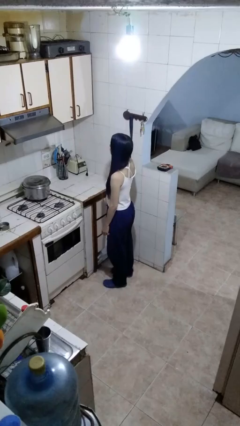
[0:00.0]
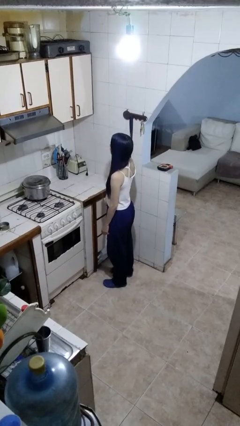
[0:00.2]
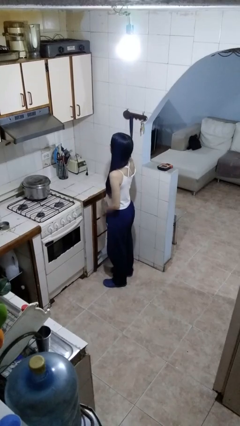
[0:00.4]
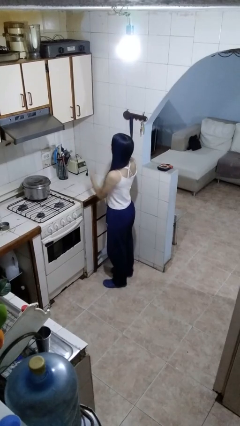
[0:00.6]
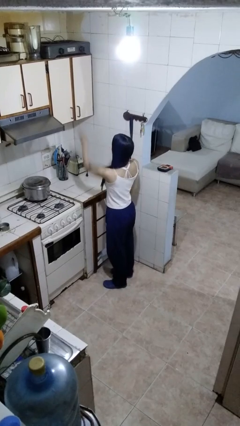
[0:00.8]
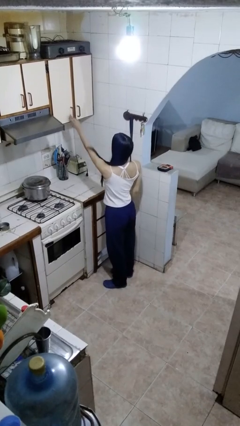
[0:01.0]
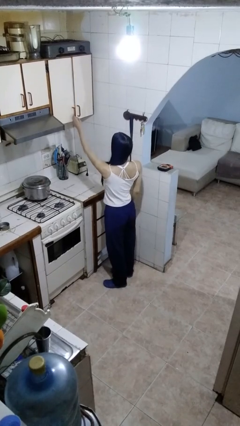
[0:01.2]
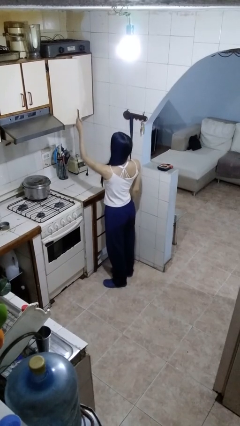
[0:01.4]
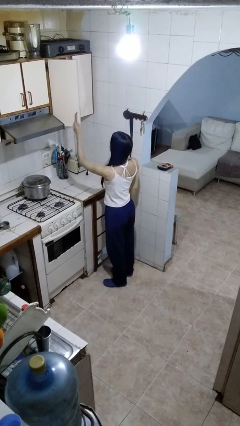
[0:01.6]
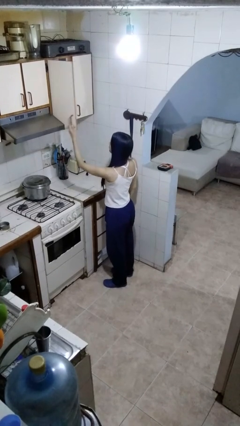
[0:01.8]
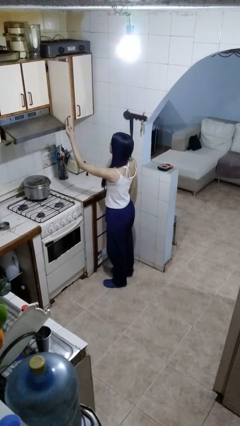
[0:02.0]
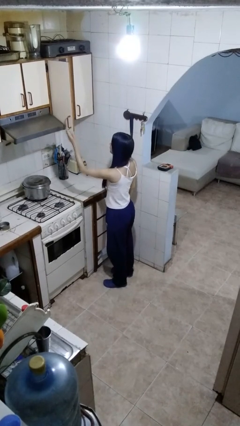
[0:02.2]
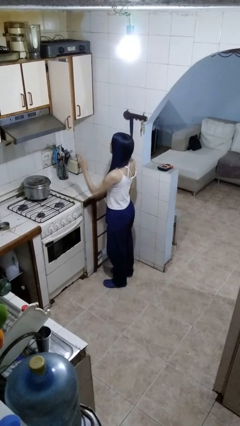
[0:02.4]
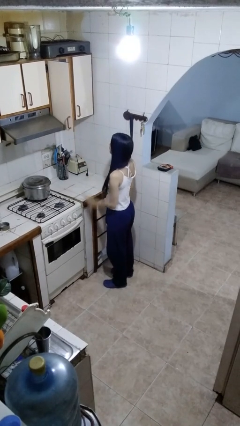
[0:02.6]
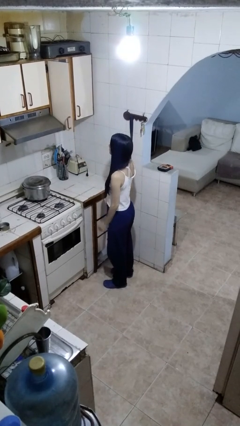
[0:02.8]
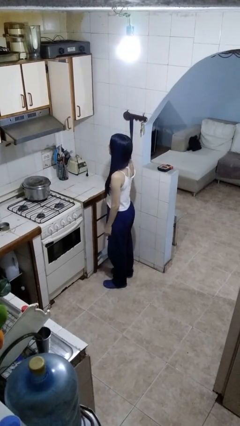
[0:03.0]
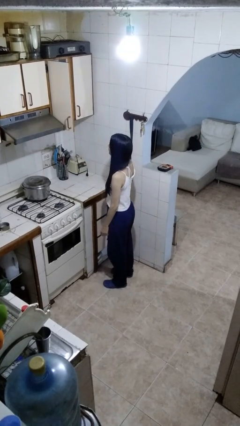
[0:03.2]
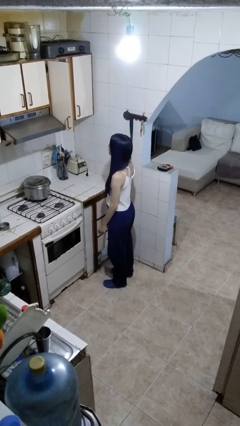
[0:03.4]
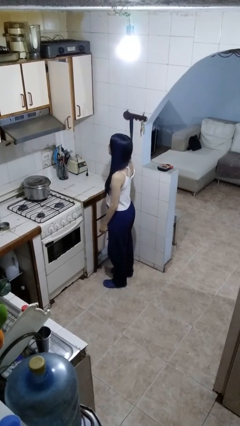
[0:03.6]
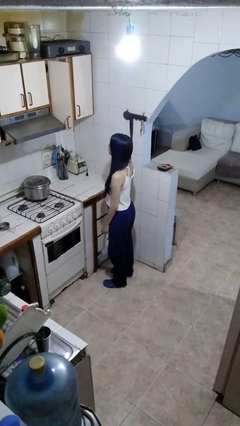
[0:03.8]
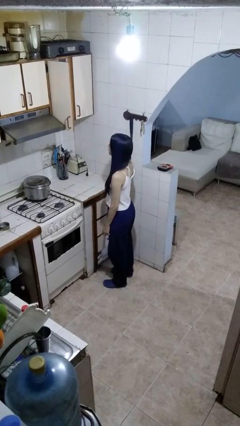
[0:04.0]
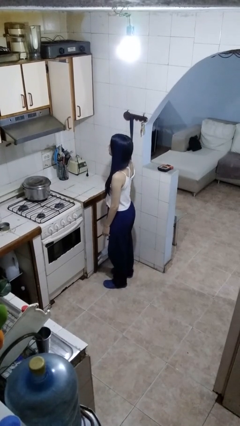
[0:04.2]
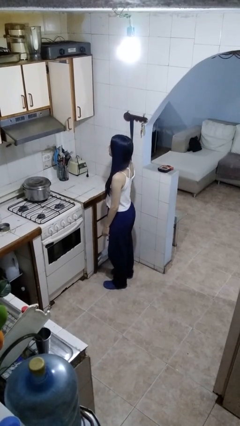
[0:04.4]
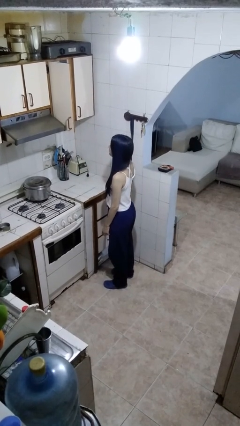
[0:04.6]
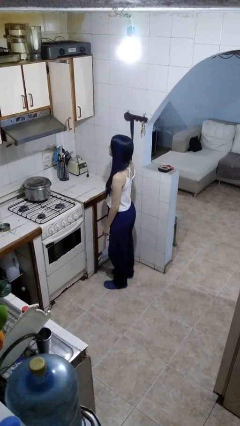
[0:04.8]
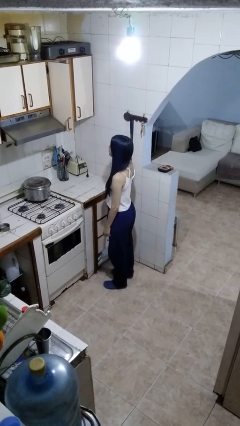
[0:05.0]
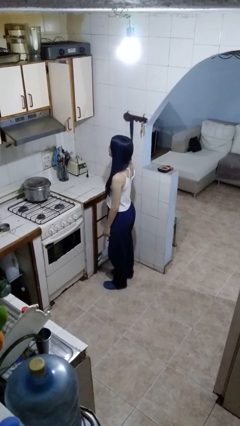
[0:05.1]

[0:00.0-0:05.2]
person opens cabinet

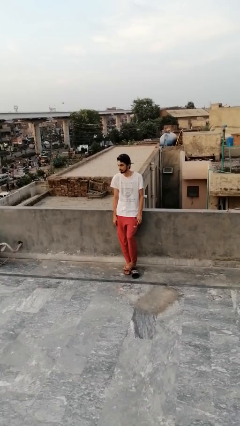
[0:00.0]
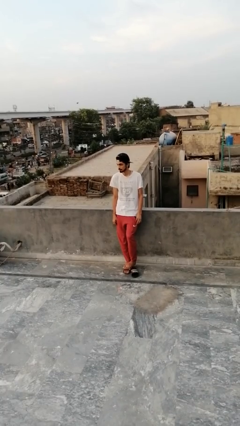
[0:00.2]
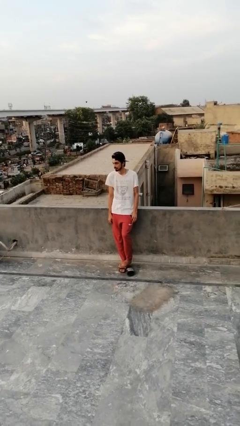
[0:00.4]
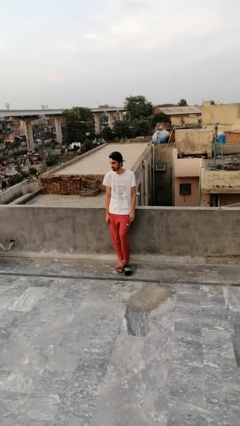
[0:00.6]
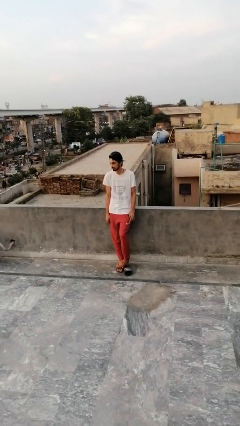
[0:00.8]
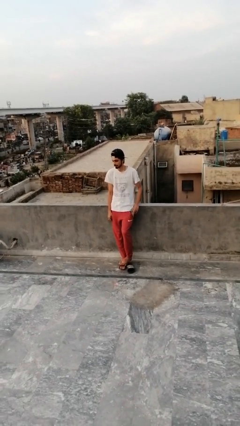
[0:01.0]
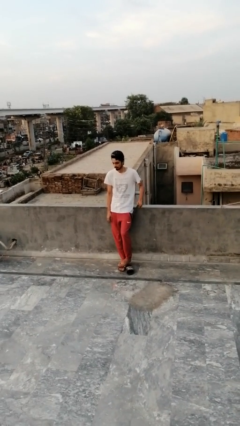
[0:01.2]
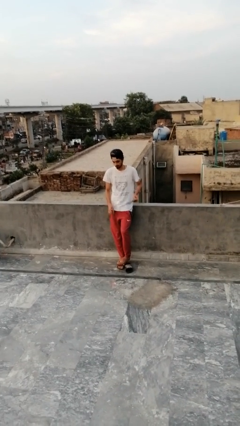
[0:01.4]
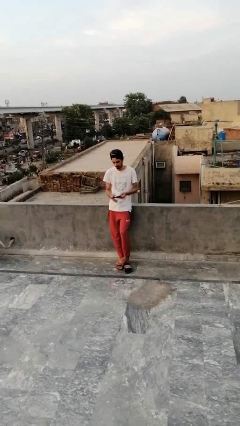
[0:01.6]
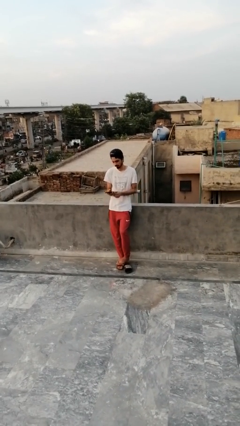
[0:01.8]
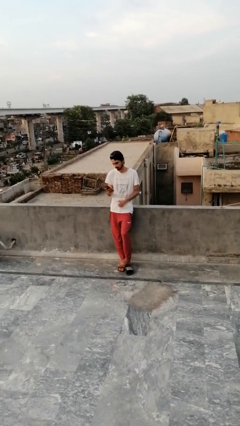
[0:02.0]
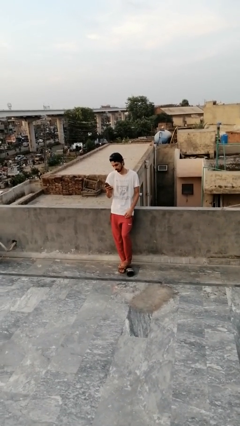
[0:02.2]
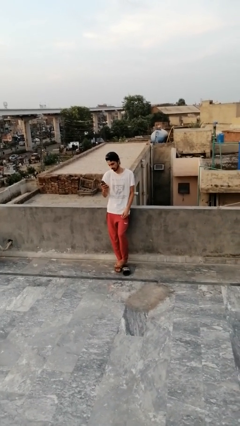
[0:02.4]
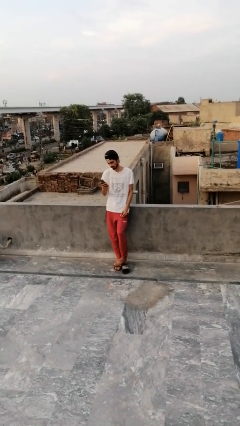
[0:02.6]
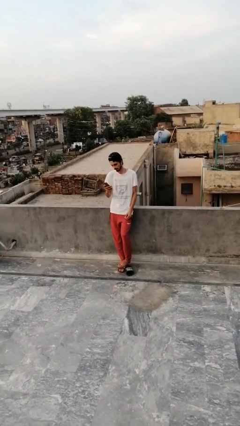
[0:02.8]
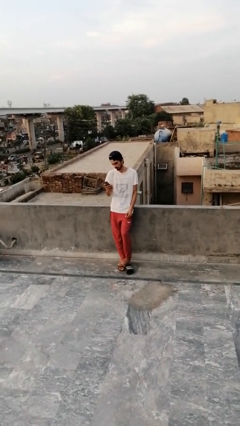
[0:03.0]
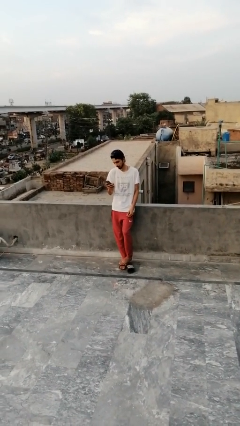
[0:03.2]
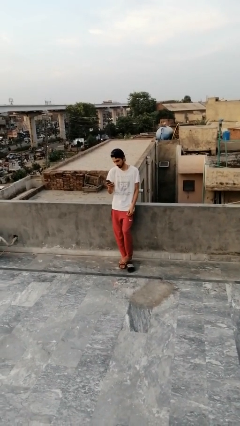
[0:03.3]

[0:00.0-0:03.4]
person takes phone from pocket

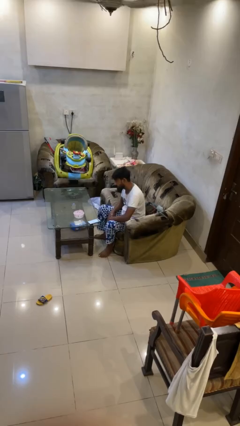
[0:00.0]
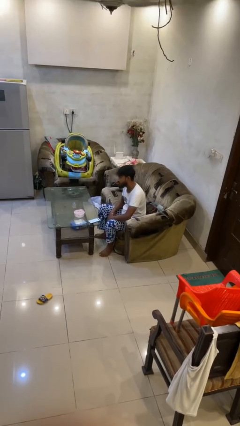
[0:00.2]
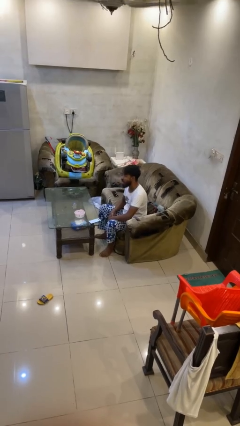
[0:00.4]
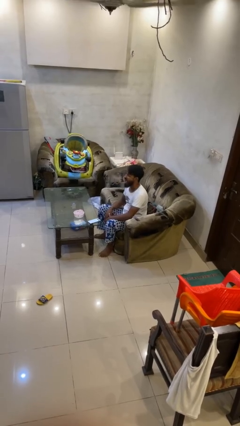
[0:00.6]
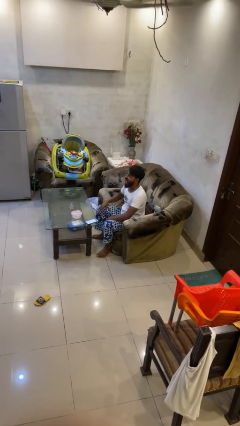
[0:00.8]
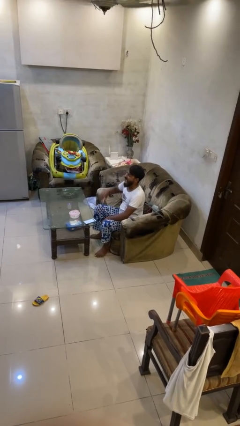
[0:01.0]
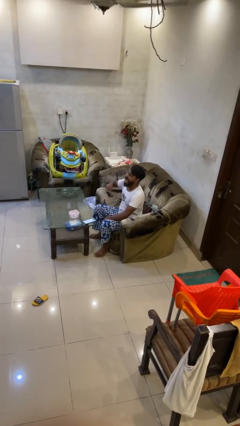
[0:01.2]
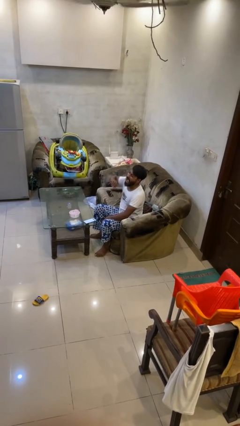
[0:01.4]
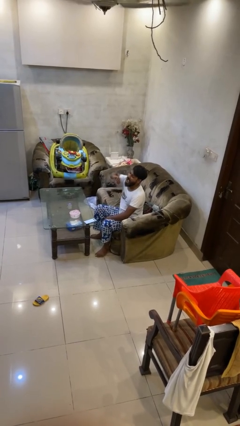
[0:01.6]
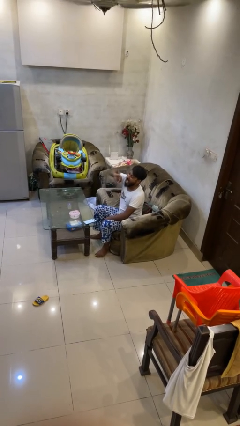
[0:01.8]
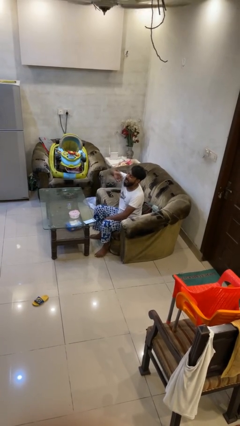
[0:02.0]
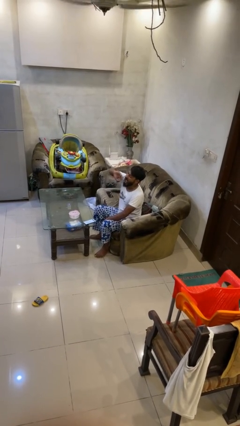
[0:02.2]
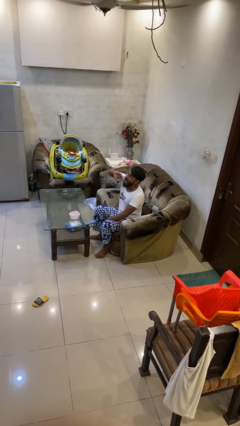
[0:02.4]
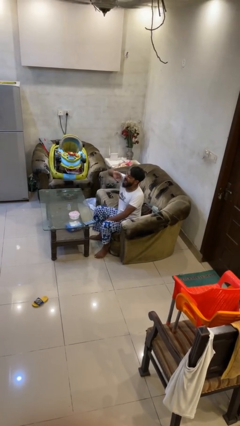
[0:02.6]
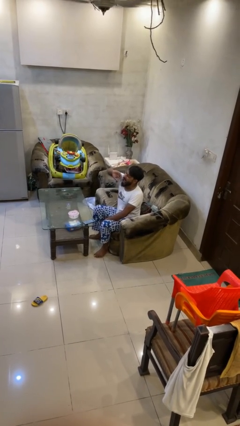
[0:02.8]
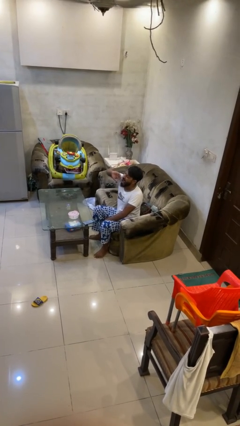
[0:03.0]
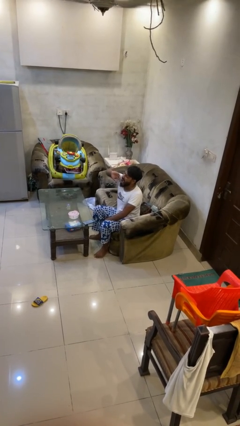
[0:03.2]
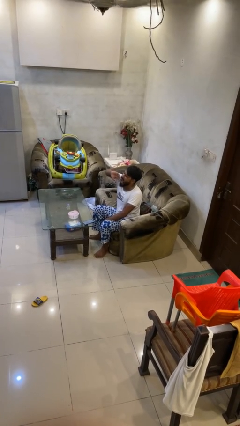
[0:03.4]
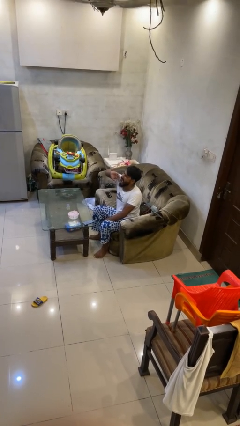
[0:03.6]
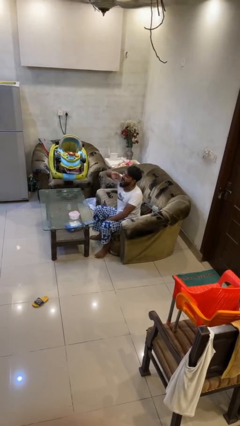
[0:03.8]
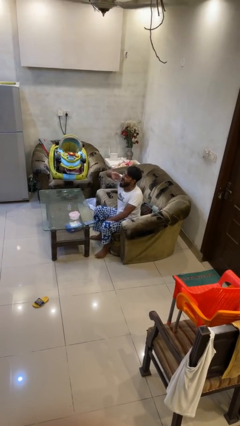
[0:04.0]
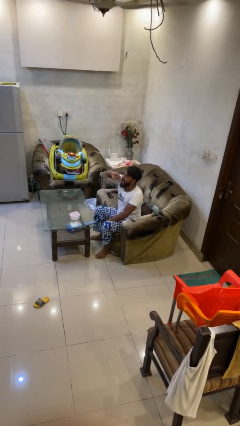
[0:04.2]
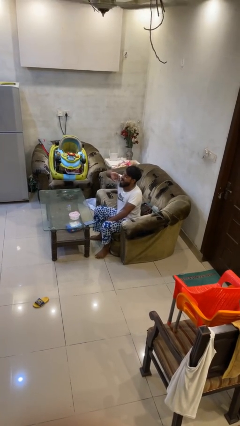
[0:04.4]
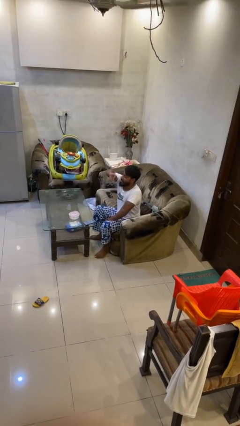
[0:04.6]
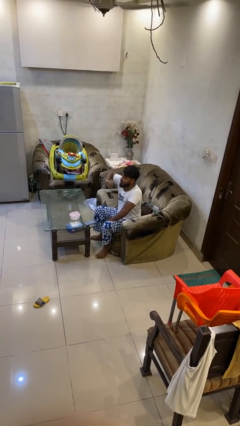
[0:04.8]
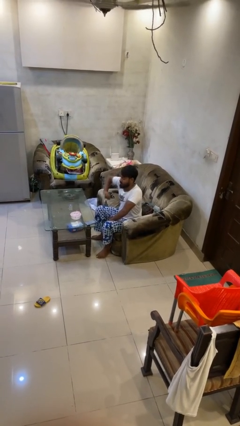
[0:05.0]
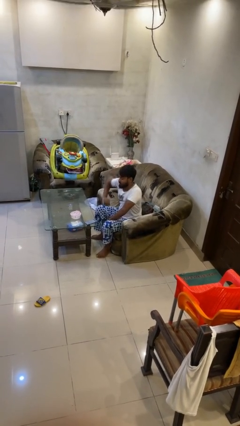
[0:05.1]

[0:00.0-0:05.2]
person yawns

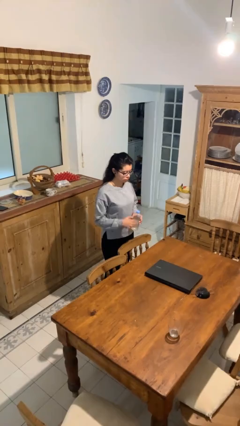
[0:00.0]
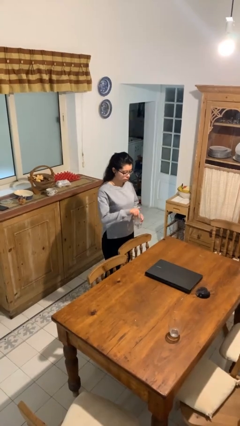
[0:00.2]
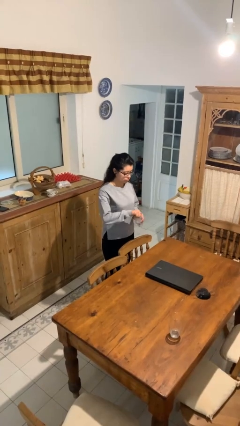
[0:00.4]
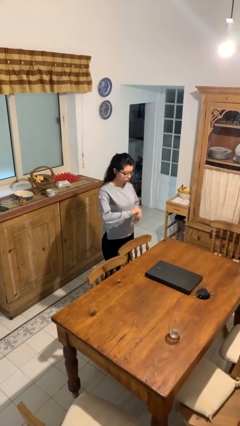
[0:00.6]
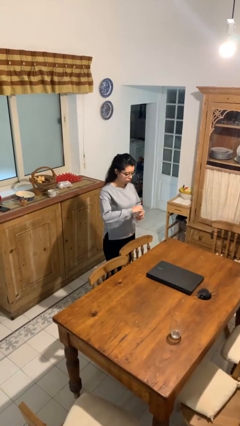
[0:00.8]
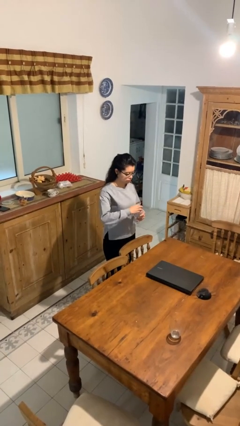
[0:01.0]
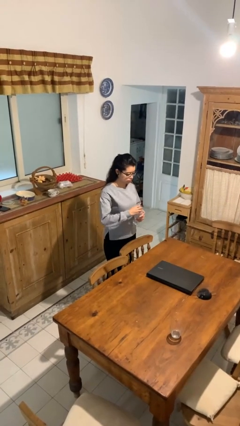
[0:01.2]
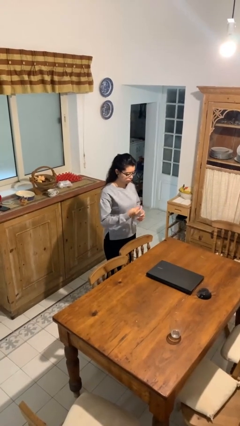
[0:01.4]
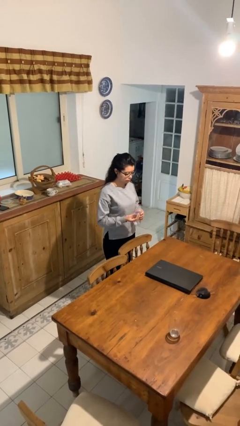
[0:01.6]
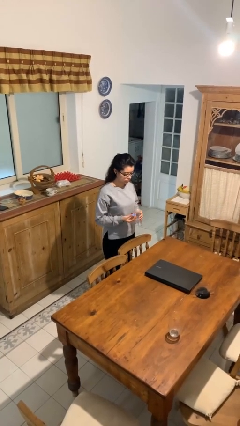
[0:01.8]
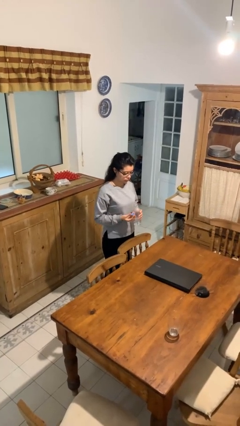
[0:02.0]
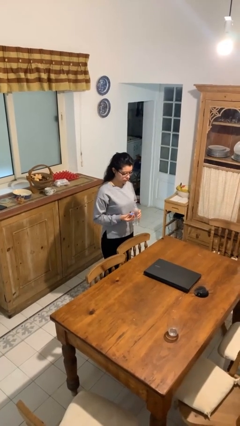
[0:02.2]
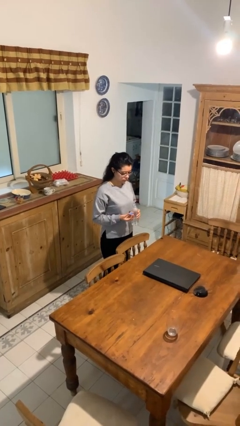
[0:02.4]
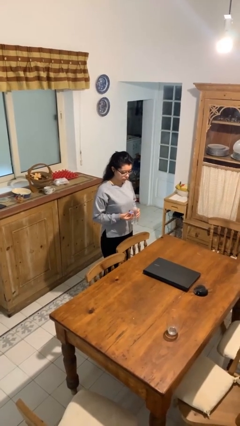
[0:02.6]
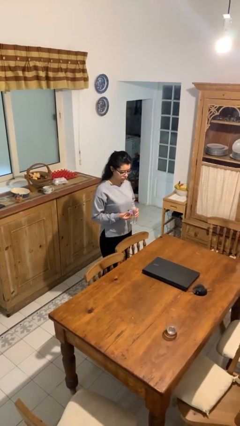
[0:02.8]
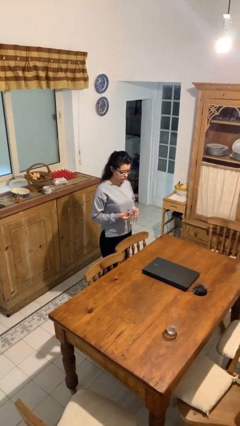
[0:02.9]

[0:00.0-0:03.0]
person unscrews lid from bottle

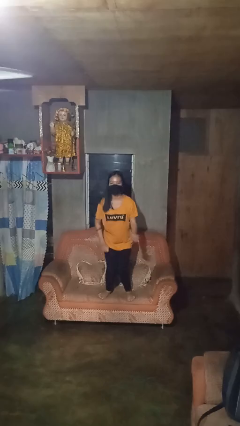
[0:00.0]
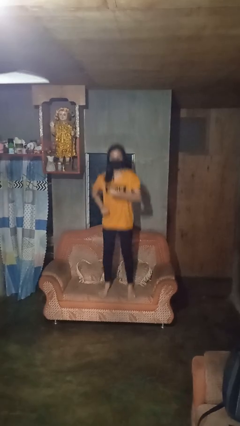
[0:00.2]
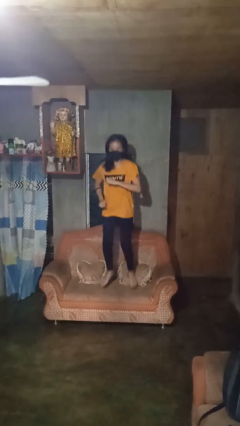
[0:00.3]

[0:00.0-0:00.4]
person jumps on couch

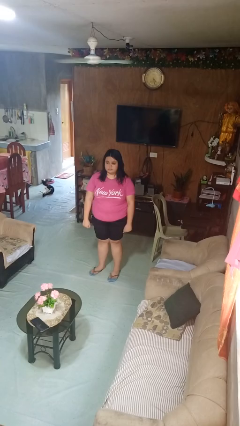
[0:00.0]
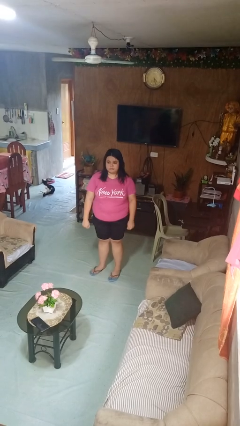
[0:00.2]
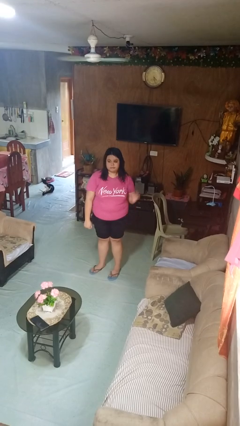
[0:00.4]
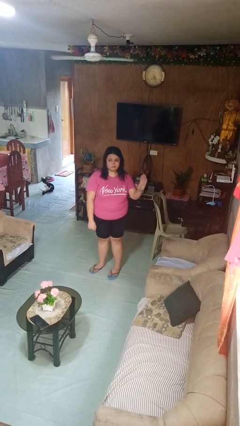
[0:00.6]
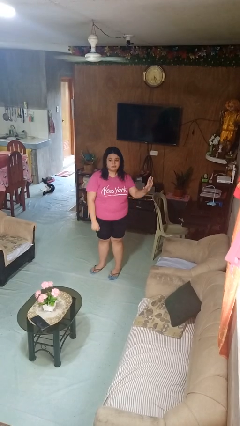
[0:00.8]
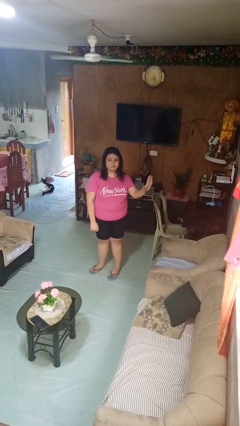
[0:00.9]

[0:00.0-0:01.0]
person gestures stop
